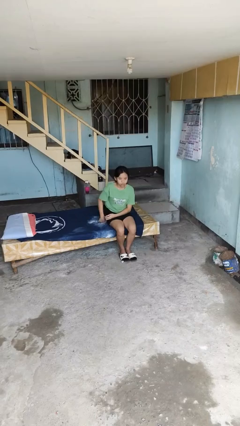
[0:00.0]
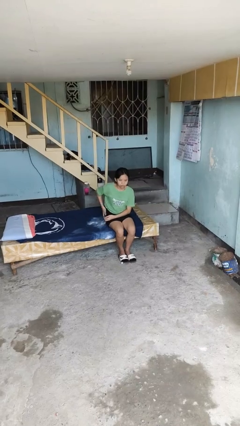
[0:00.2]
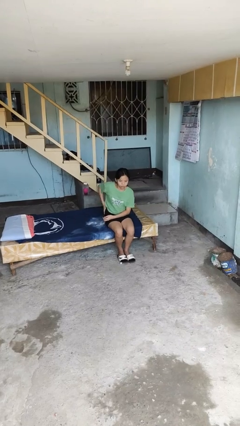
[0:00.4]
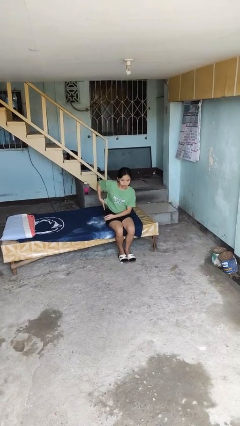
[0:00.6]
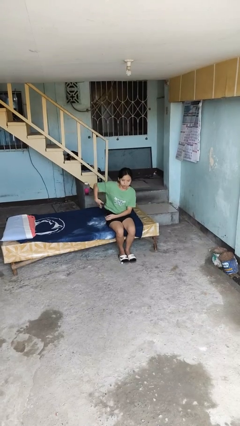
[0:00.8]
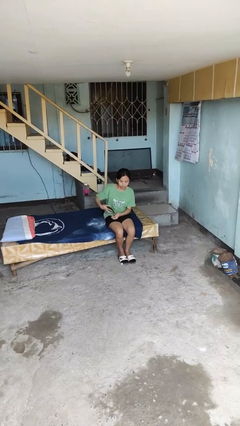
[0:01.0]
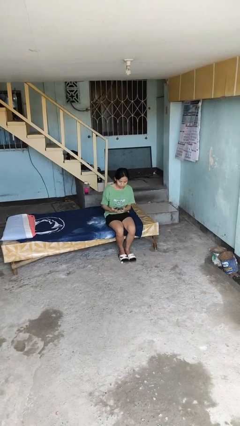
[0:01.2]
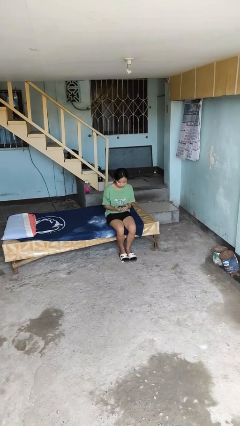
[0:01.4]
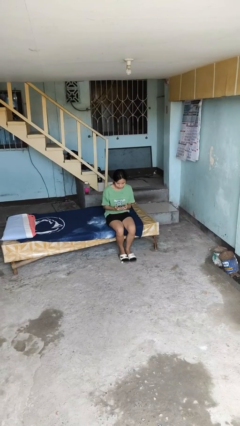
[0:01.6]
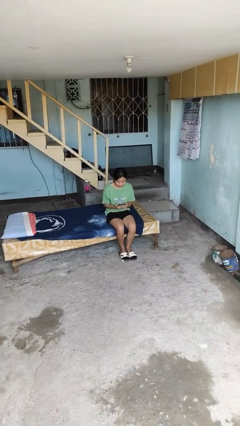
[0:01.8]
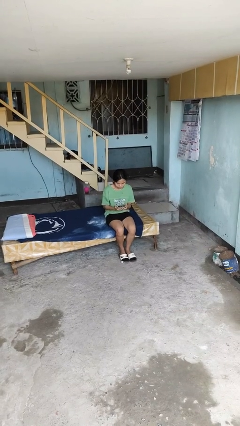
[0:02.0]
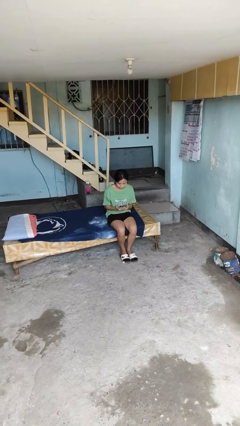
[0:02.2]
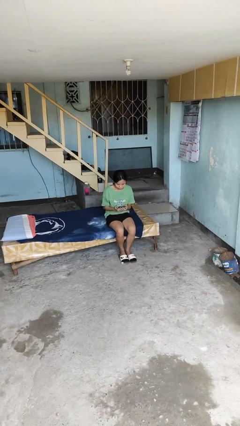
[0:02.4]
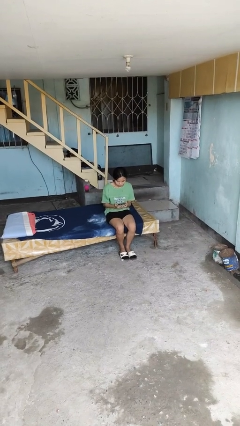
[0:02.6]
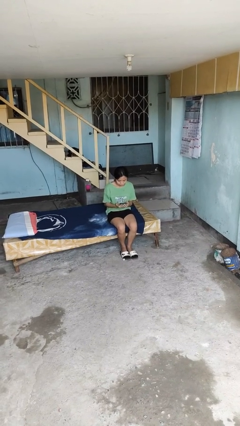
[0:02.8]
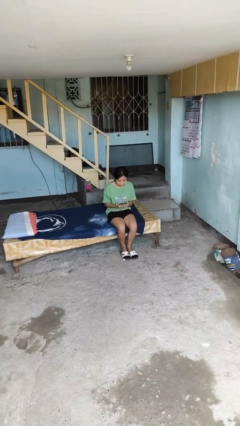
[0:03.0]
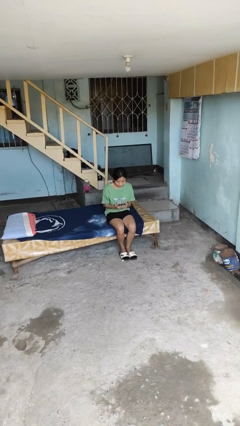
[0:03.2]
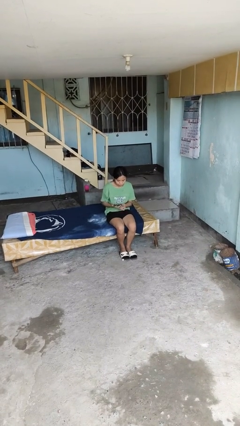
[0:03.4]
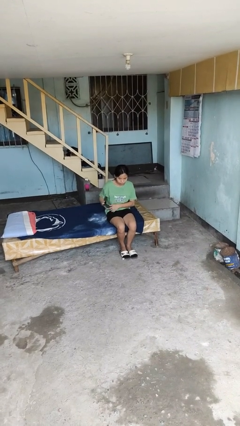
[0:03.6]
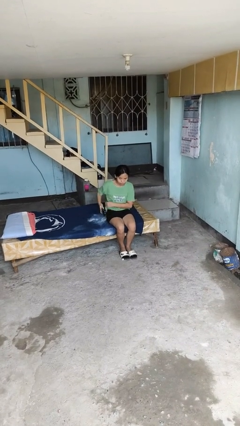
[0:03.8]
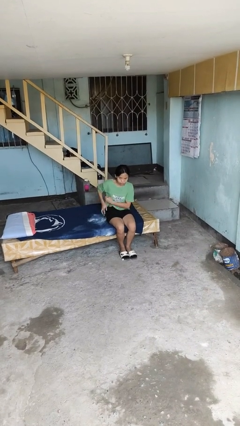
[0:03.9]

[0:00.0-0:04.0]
person takes phone from pocket

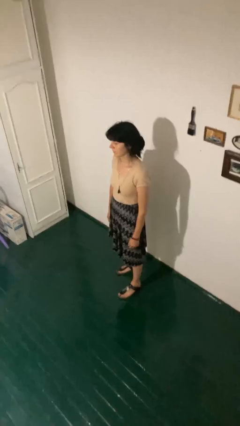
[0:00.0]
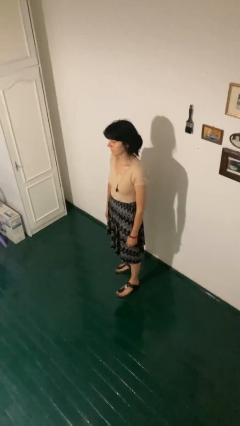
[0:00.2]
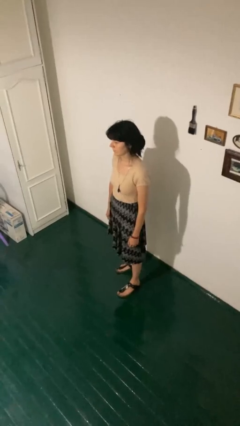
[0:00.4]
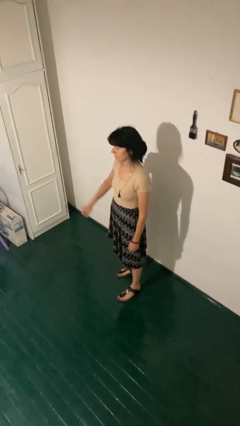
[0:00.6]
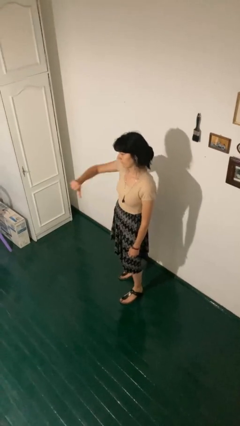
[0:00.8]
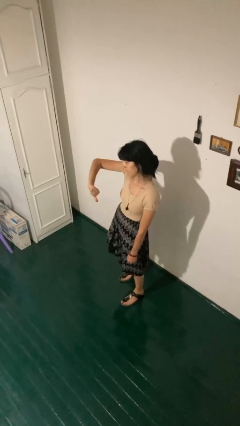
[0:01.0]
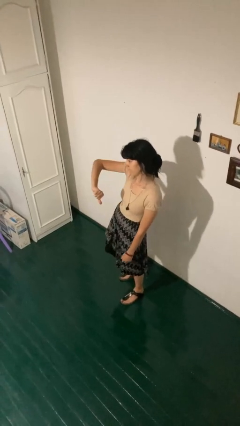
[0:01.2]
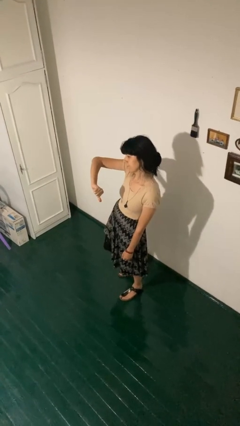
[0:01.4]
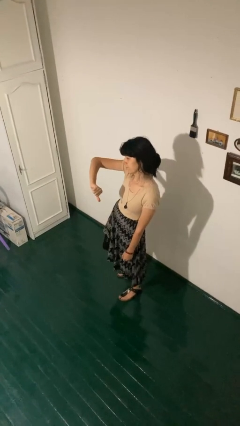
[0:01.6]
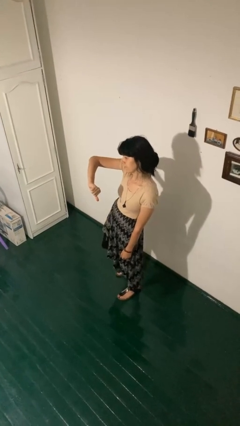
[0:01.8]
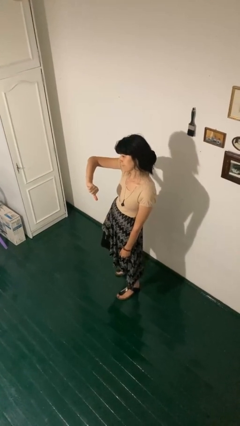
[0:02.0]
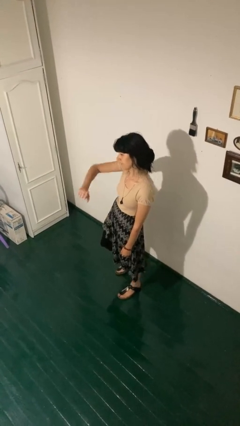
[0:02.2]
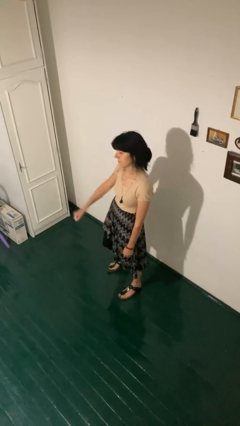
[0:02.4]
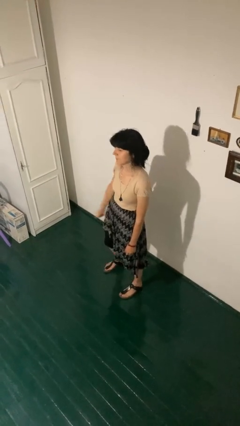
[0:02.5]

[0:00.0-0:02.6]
person gestures thumbs down

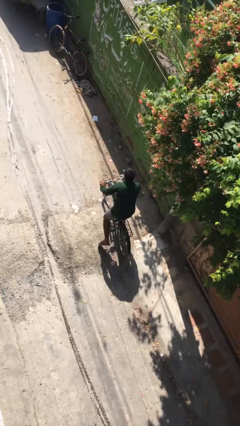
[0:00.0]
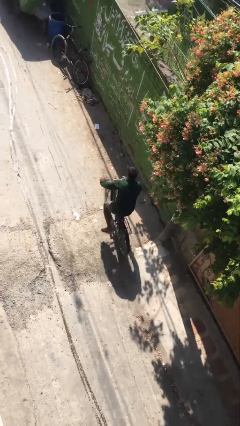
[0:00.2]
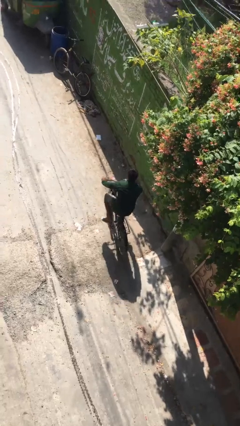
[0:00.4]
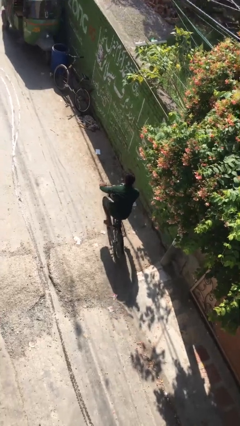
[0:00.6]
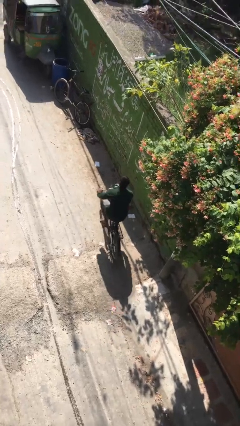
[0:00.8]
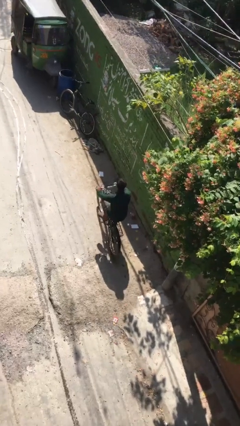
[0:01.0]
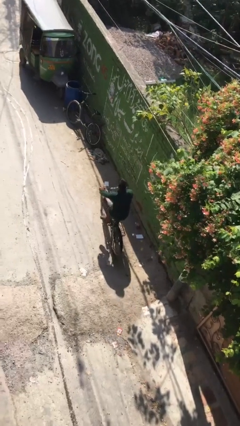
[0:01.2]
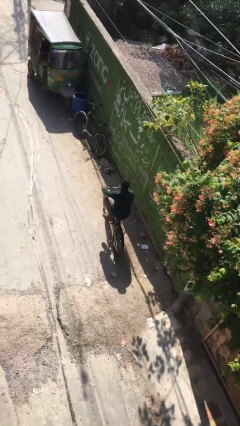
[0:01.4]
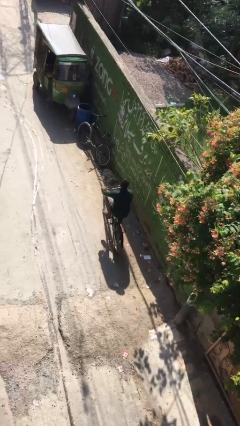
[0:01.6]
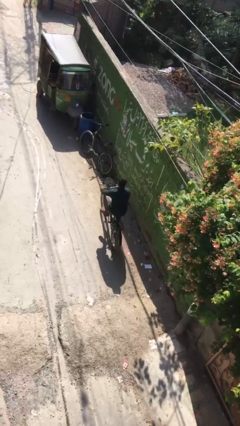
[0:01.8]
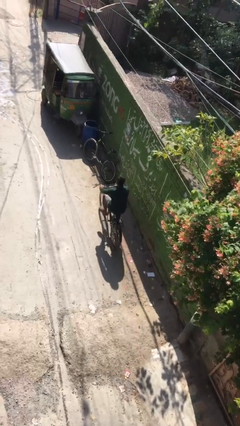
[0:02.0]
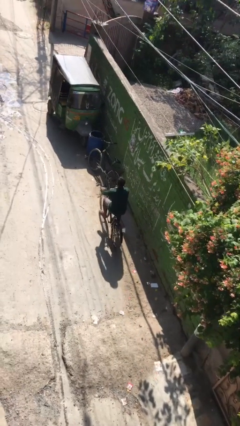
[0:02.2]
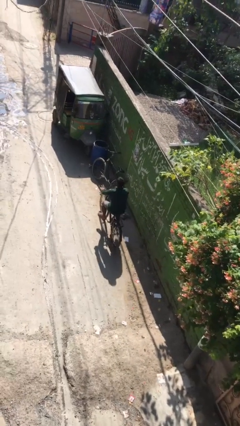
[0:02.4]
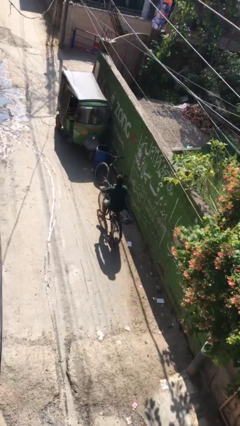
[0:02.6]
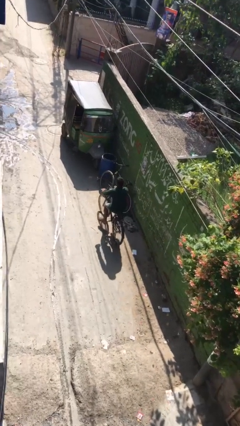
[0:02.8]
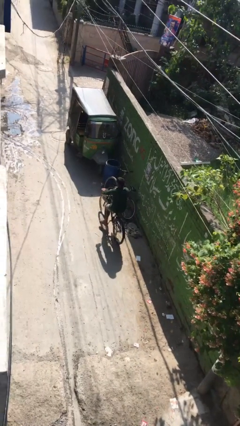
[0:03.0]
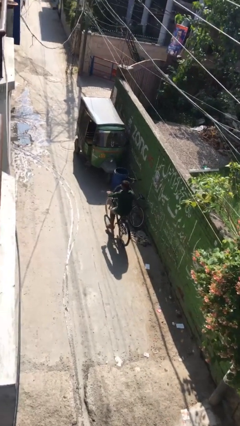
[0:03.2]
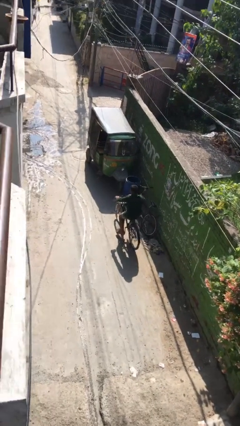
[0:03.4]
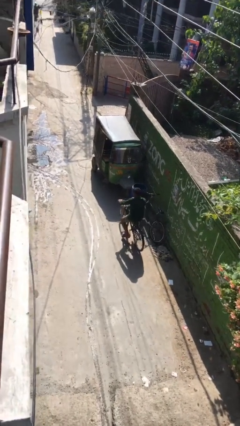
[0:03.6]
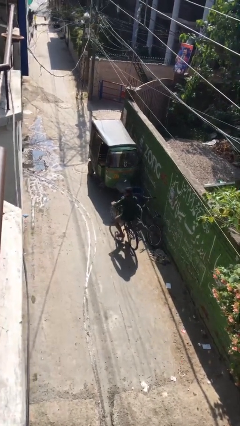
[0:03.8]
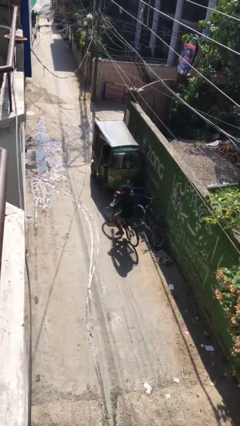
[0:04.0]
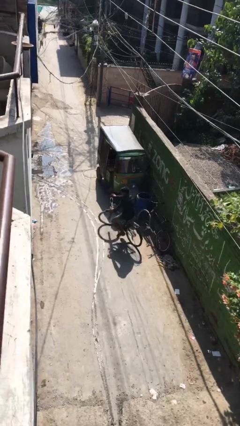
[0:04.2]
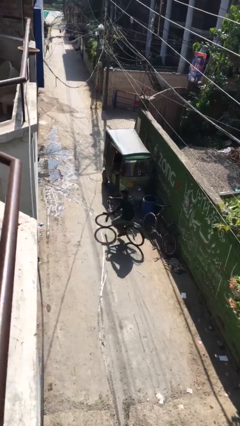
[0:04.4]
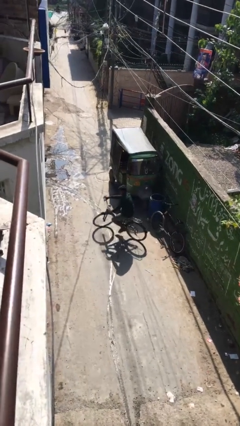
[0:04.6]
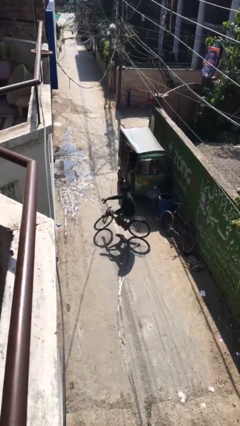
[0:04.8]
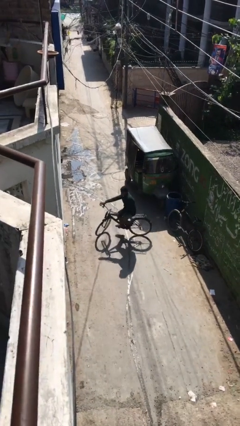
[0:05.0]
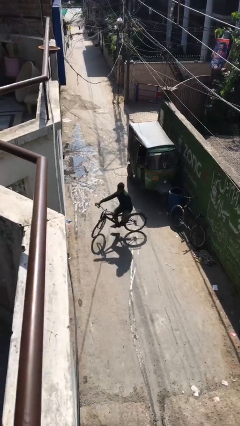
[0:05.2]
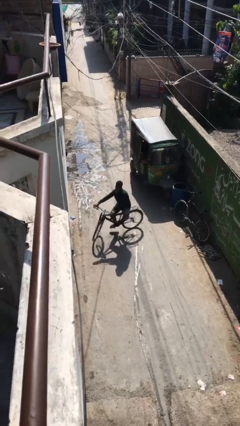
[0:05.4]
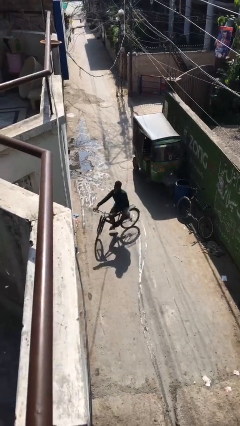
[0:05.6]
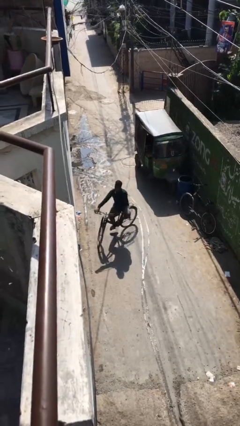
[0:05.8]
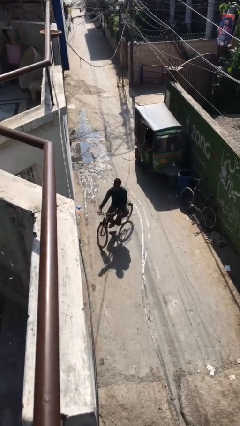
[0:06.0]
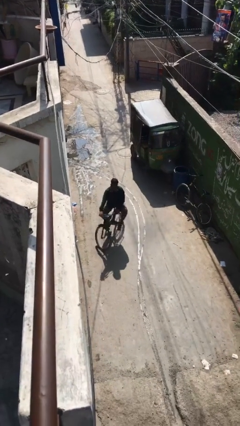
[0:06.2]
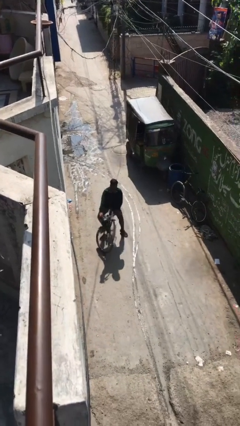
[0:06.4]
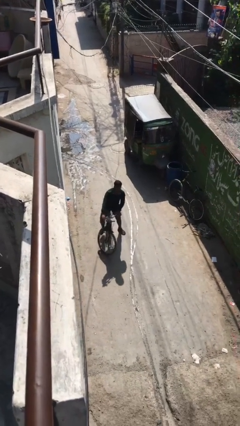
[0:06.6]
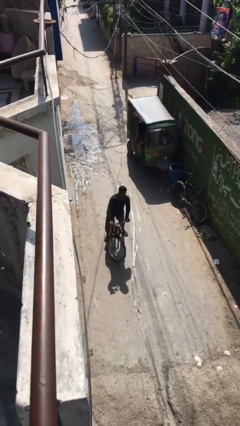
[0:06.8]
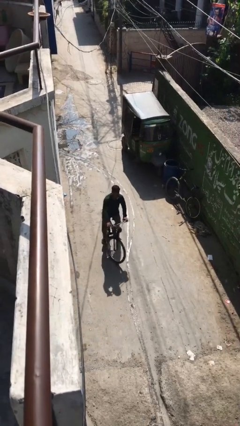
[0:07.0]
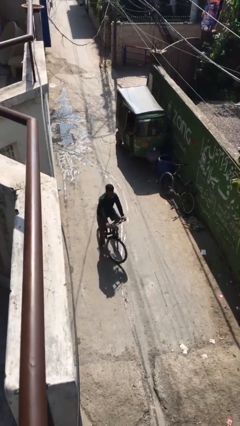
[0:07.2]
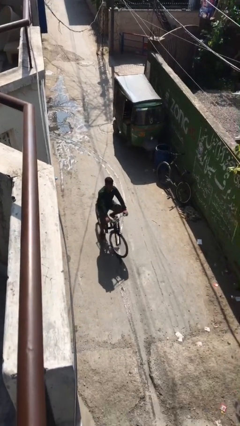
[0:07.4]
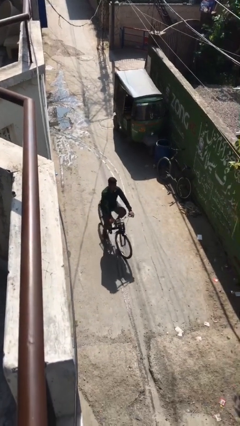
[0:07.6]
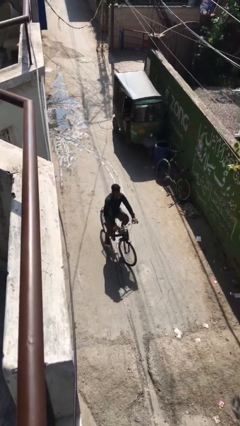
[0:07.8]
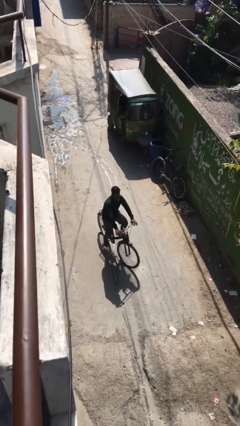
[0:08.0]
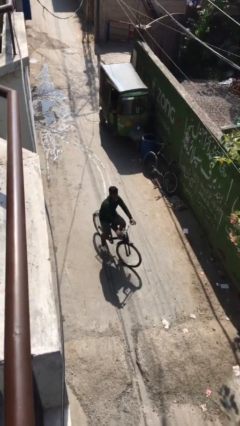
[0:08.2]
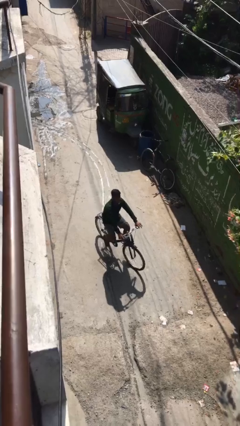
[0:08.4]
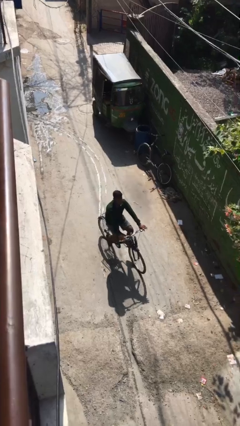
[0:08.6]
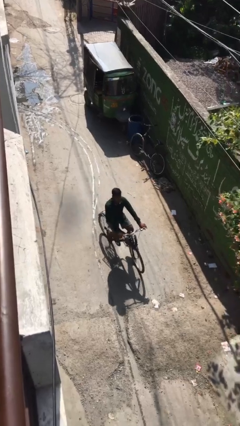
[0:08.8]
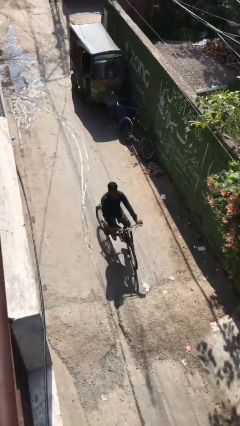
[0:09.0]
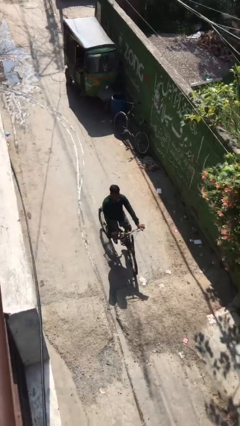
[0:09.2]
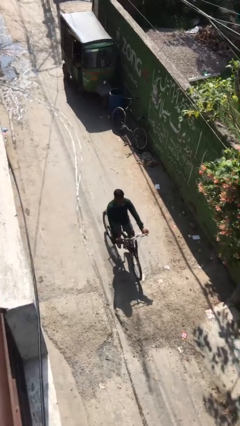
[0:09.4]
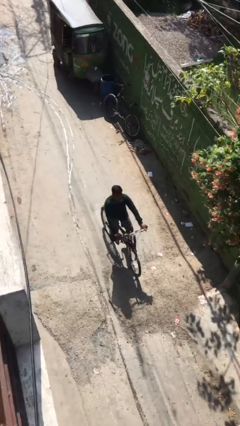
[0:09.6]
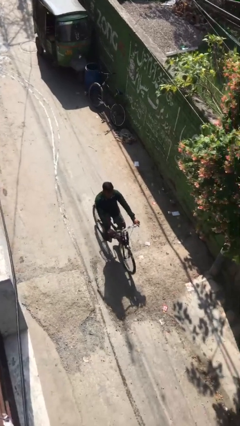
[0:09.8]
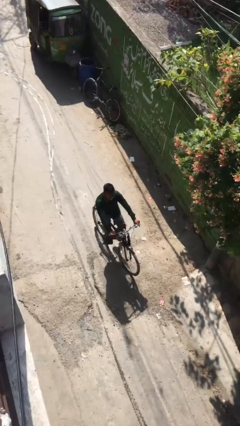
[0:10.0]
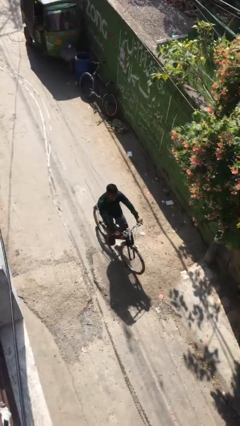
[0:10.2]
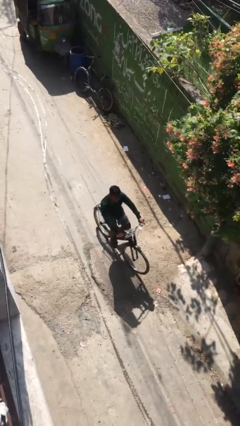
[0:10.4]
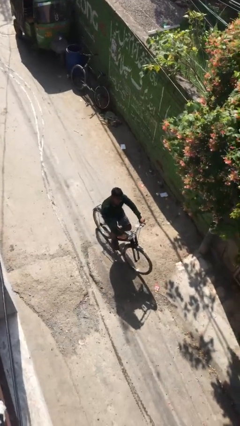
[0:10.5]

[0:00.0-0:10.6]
person rides bicycle

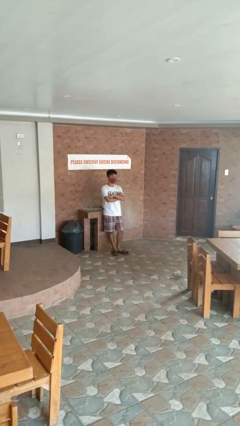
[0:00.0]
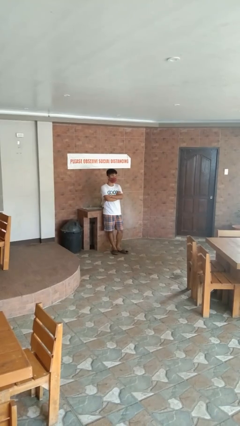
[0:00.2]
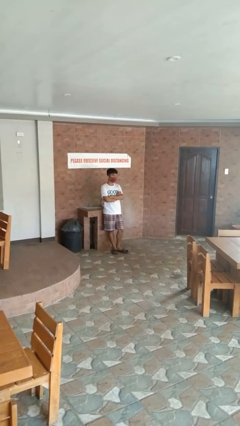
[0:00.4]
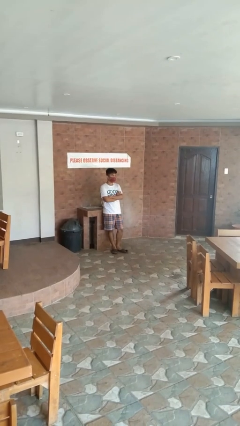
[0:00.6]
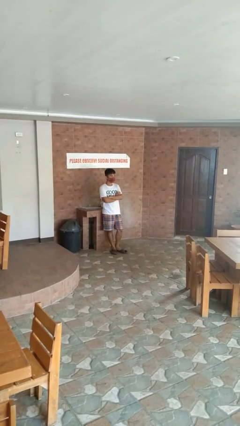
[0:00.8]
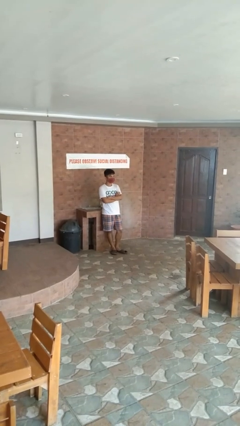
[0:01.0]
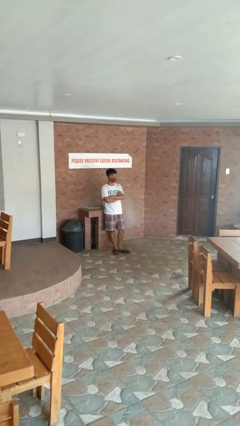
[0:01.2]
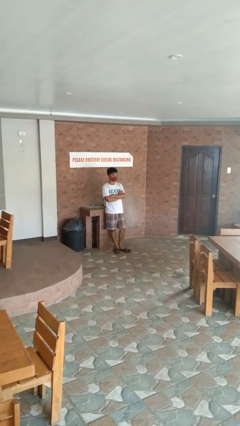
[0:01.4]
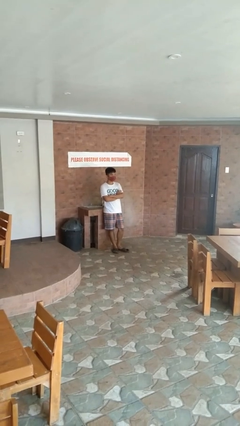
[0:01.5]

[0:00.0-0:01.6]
person crosses arms
